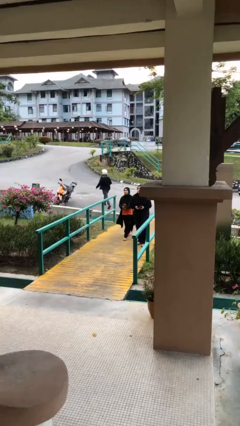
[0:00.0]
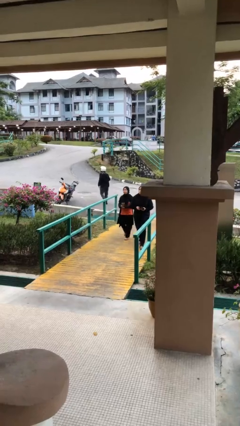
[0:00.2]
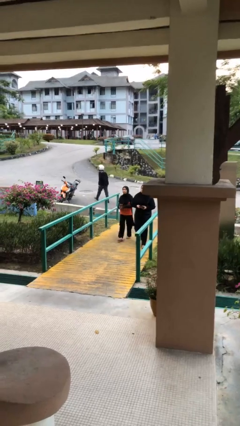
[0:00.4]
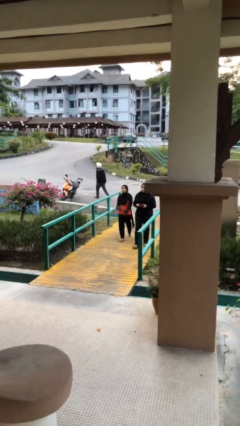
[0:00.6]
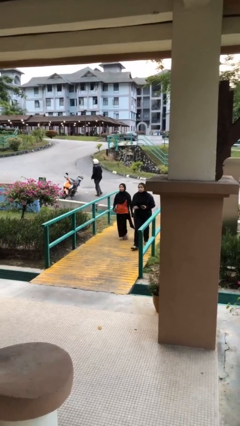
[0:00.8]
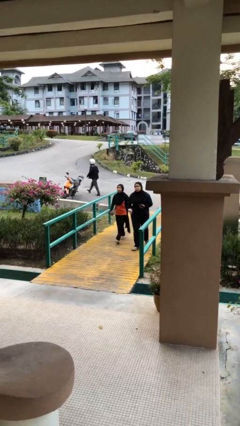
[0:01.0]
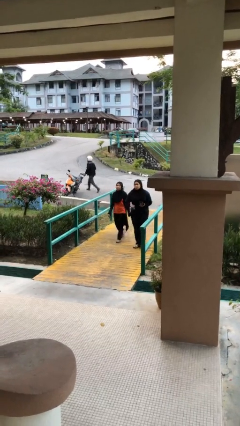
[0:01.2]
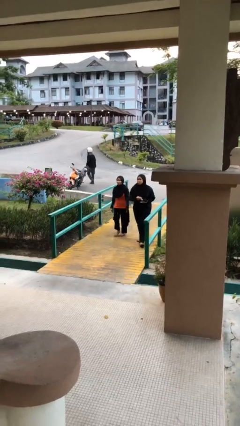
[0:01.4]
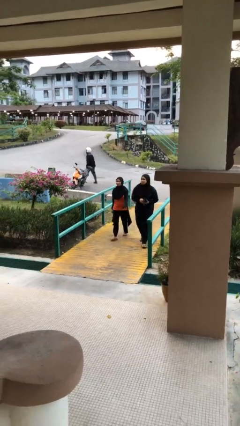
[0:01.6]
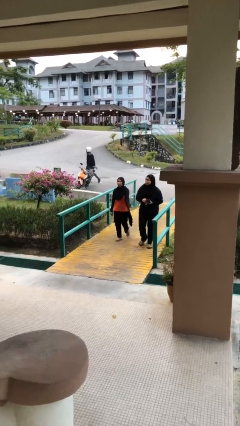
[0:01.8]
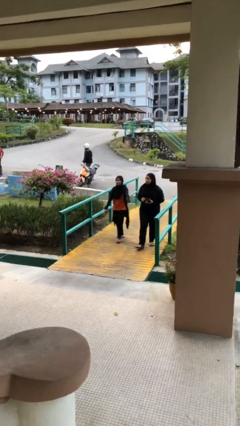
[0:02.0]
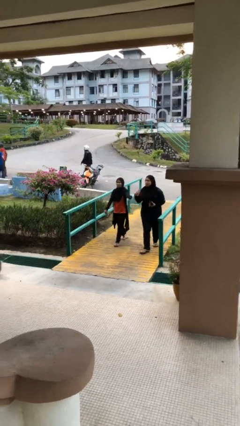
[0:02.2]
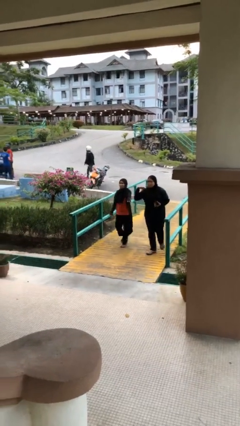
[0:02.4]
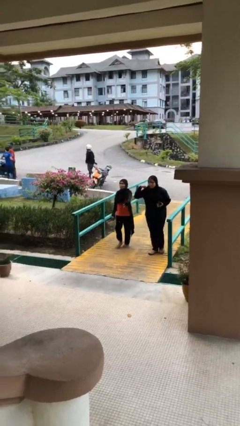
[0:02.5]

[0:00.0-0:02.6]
person talks to person

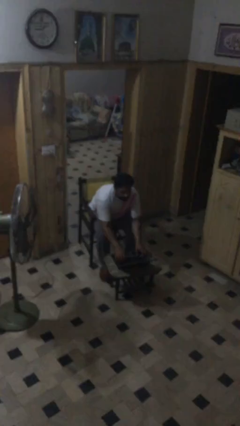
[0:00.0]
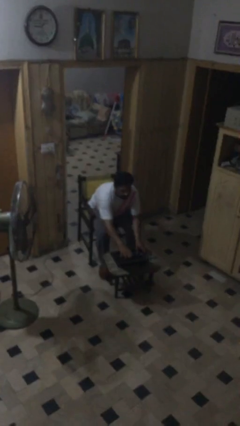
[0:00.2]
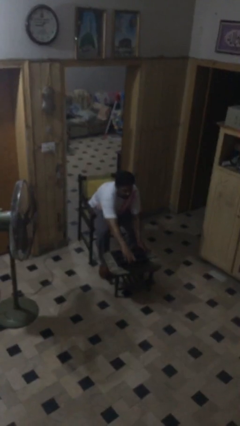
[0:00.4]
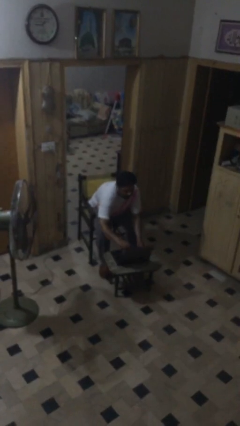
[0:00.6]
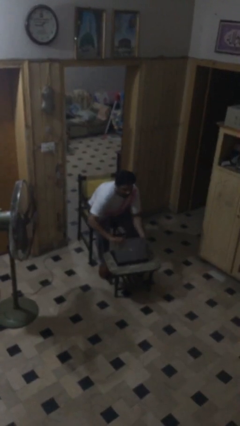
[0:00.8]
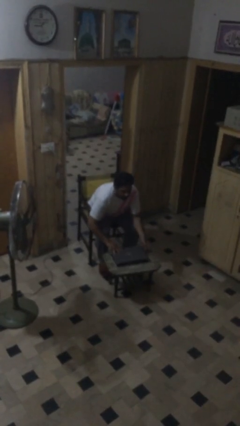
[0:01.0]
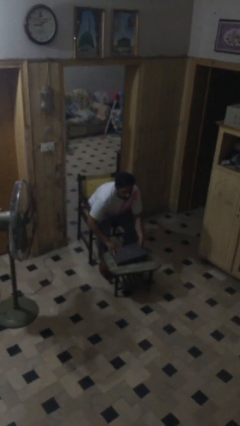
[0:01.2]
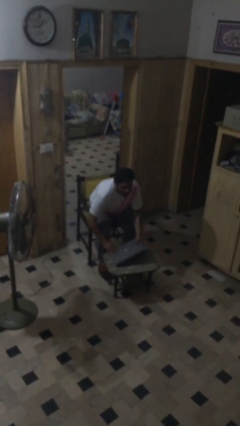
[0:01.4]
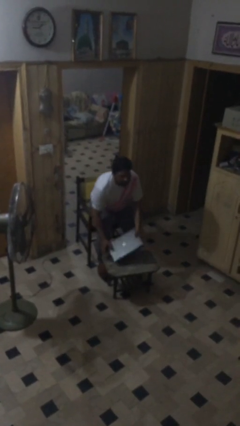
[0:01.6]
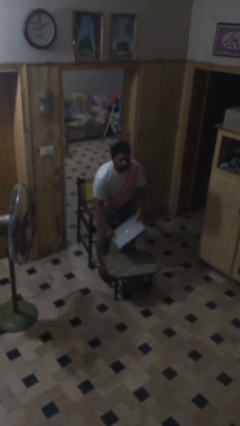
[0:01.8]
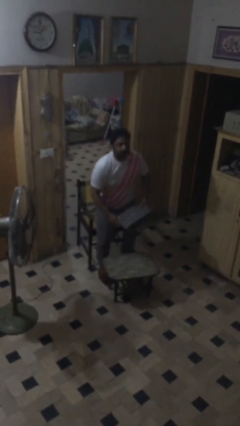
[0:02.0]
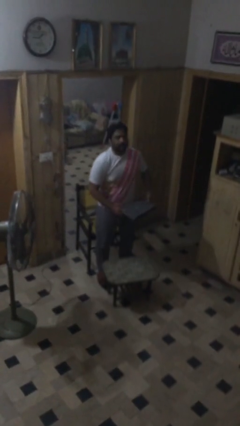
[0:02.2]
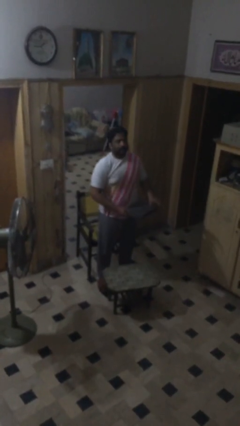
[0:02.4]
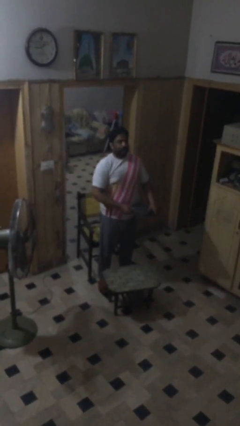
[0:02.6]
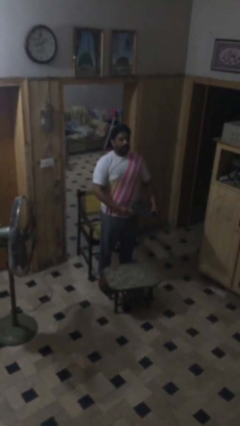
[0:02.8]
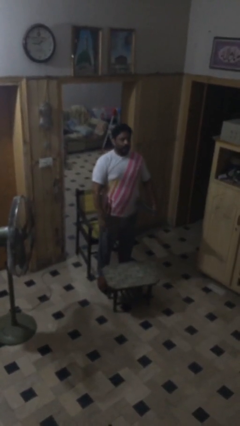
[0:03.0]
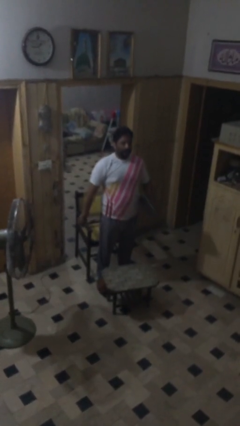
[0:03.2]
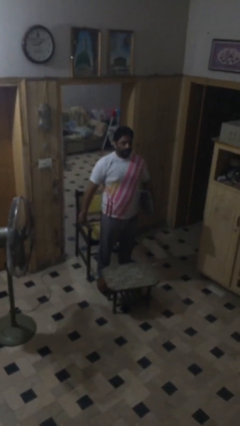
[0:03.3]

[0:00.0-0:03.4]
person stands up

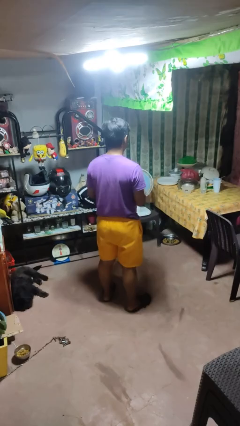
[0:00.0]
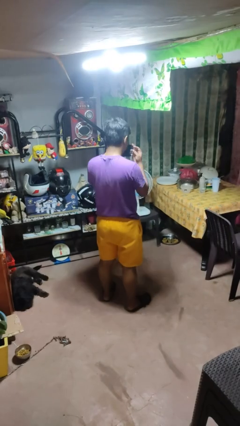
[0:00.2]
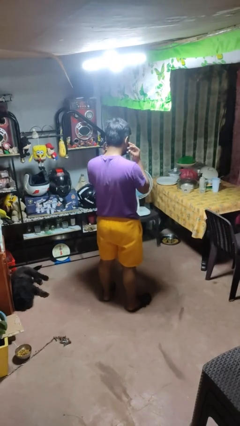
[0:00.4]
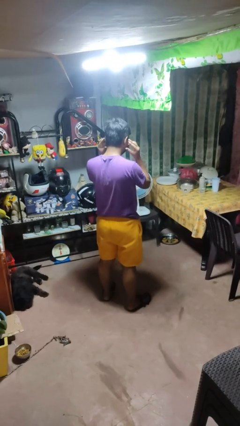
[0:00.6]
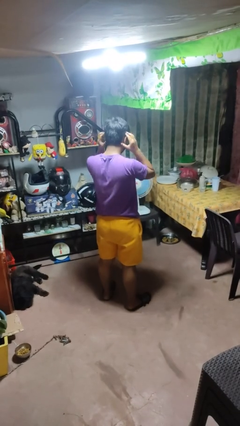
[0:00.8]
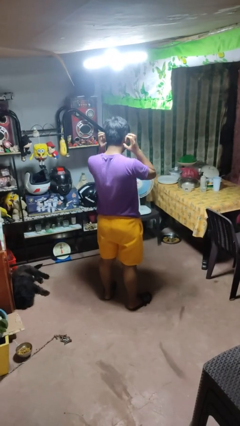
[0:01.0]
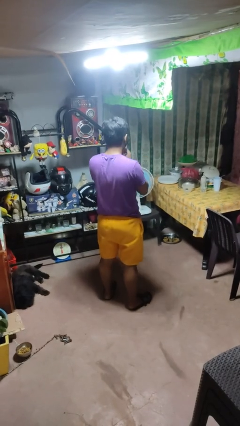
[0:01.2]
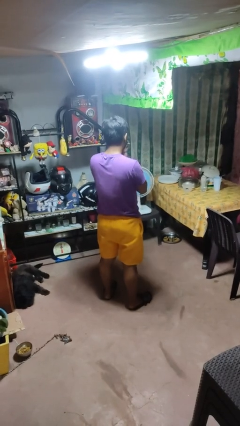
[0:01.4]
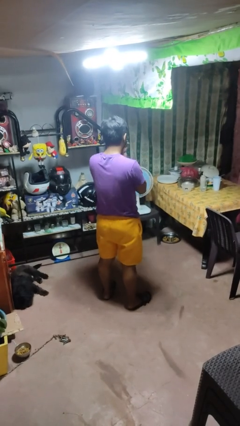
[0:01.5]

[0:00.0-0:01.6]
person puts on facemask

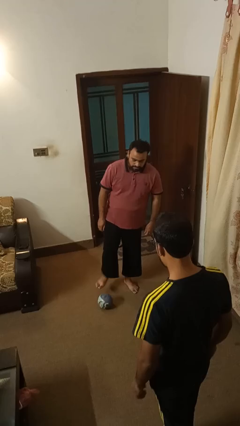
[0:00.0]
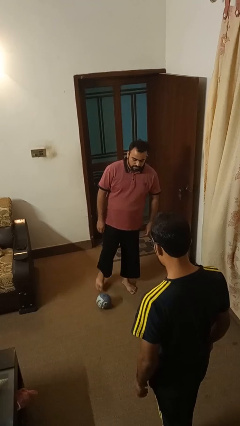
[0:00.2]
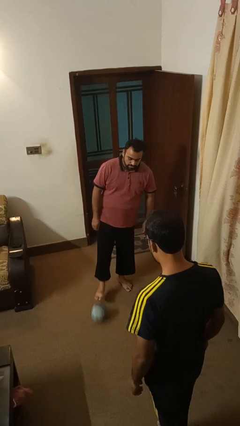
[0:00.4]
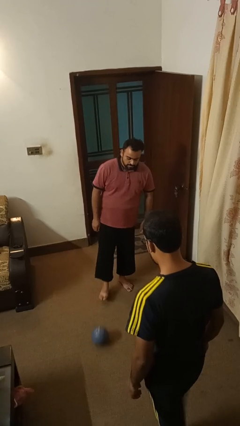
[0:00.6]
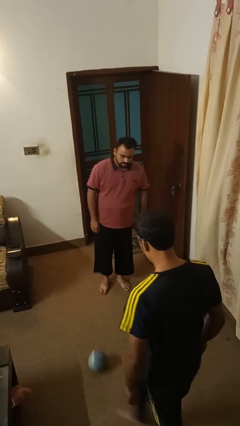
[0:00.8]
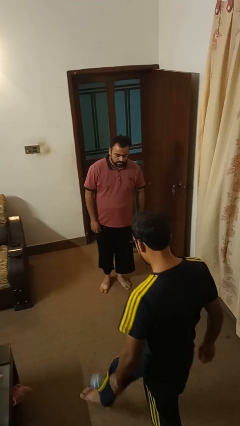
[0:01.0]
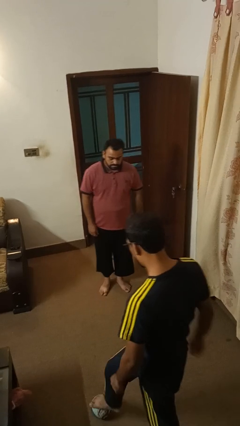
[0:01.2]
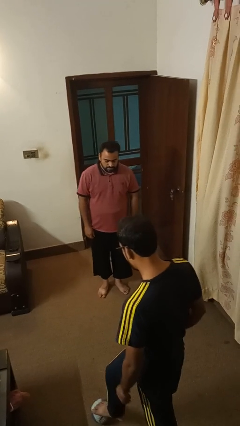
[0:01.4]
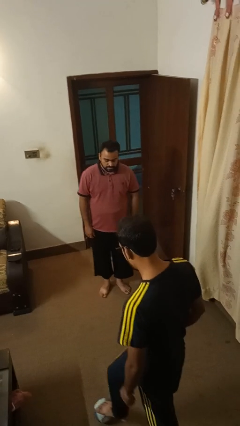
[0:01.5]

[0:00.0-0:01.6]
person kicks object to person

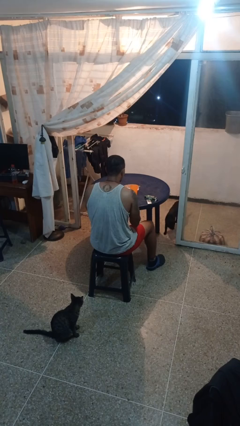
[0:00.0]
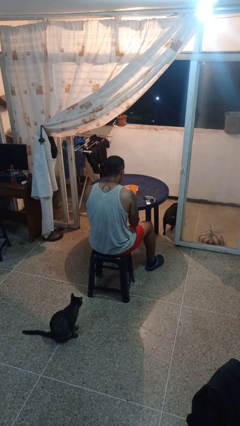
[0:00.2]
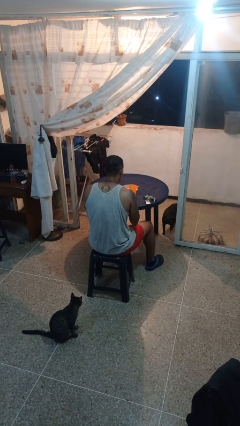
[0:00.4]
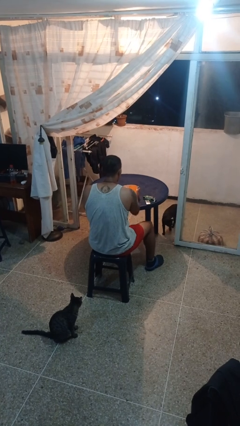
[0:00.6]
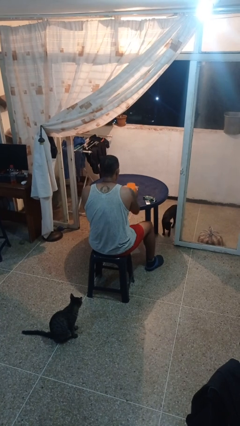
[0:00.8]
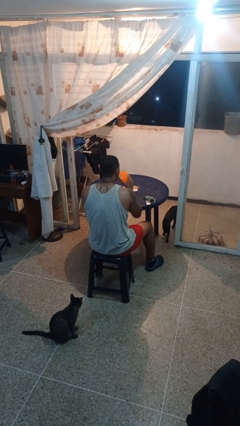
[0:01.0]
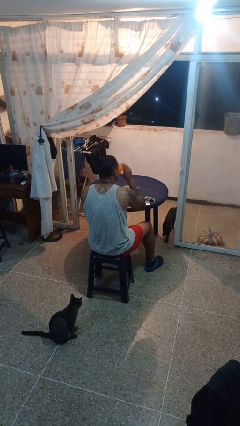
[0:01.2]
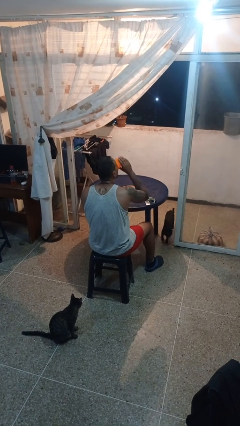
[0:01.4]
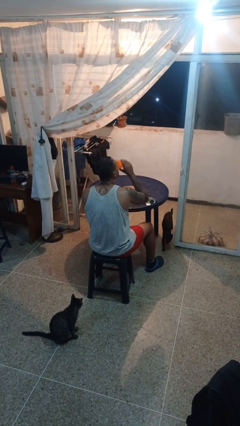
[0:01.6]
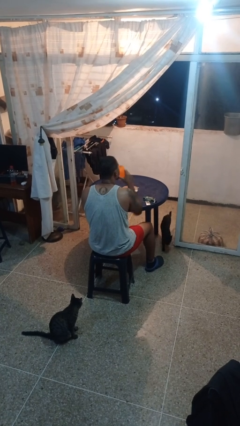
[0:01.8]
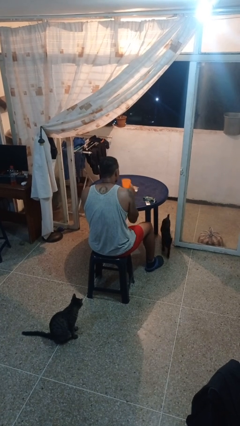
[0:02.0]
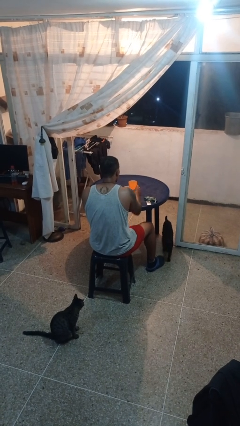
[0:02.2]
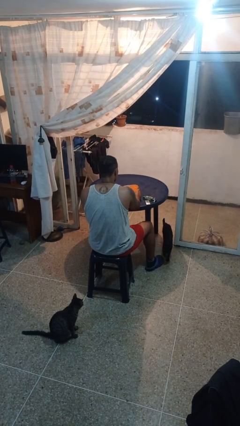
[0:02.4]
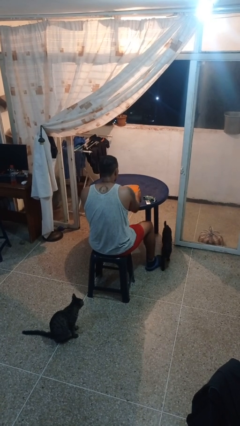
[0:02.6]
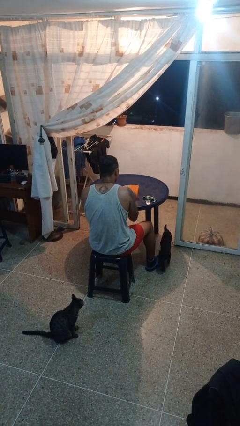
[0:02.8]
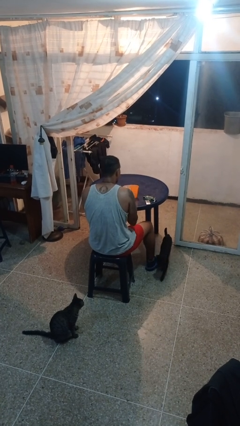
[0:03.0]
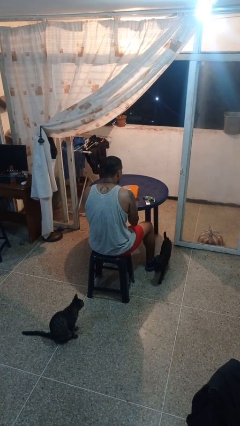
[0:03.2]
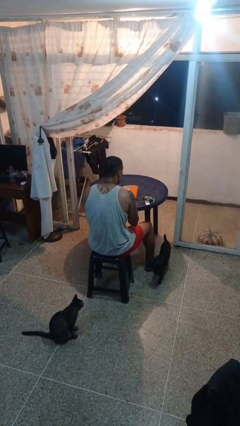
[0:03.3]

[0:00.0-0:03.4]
person drinks from cup

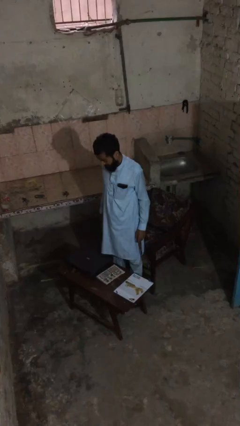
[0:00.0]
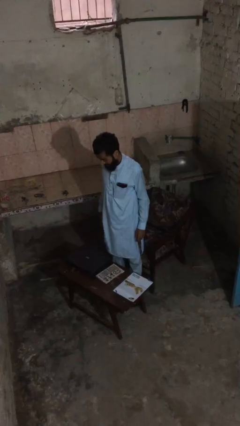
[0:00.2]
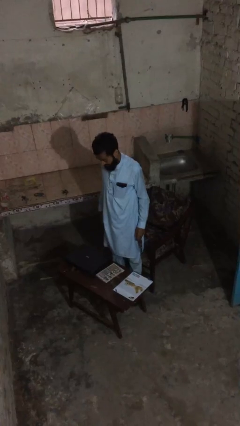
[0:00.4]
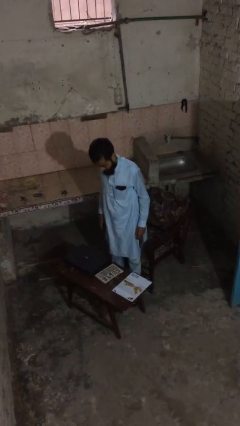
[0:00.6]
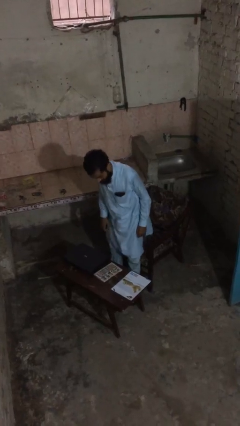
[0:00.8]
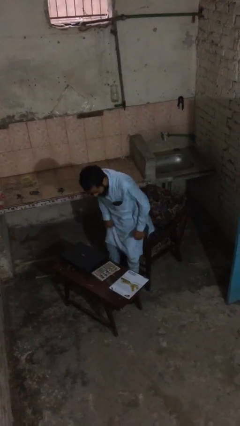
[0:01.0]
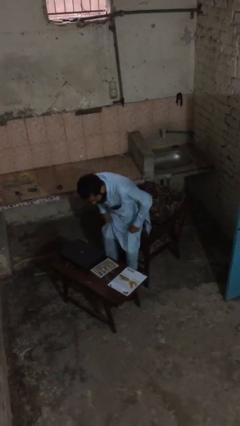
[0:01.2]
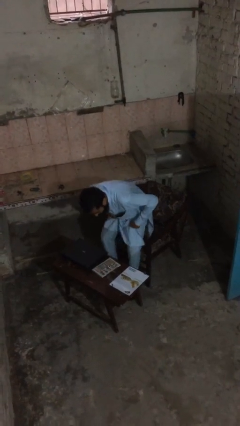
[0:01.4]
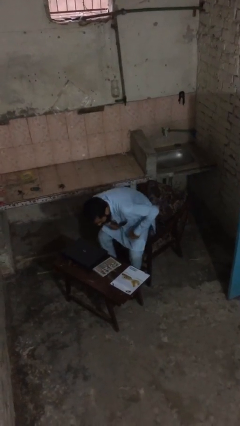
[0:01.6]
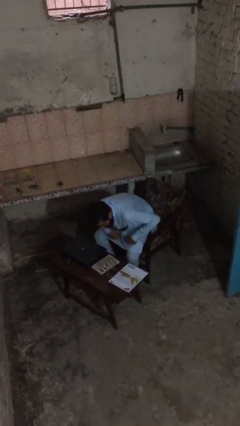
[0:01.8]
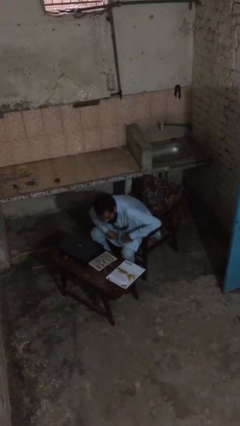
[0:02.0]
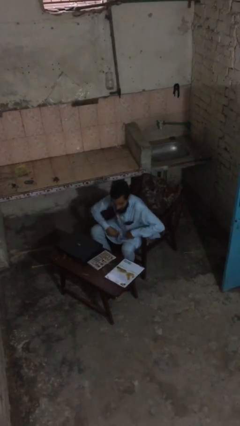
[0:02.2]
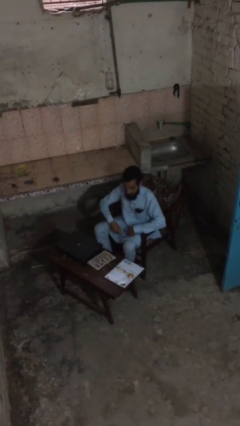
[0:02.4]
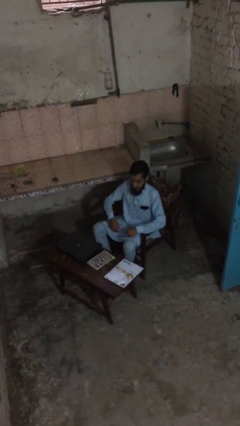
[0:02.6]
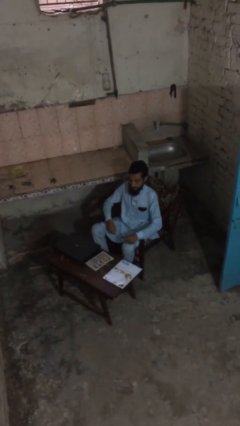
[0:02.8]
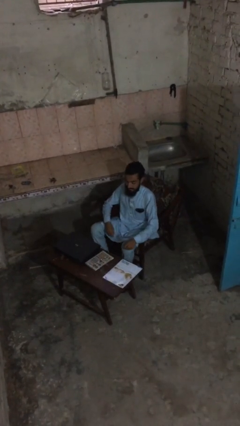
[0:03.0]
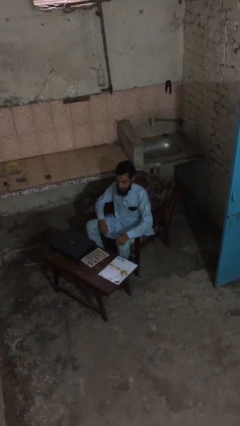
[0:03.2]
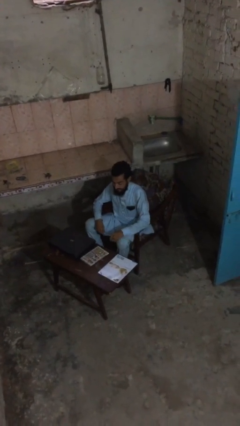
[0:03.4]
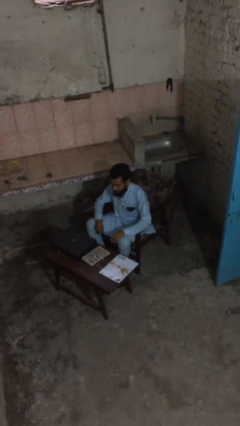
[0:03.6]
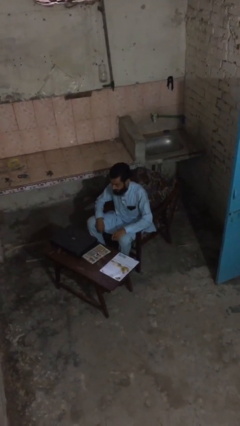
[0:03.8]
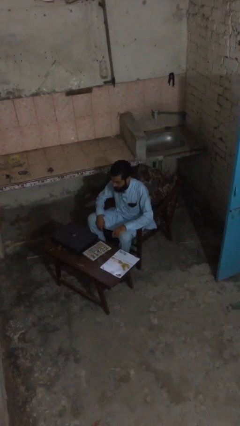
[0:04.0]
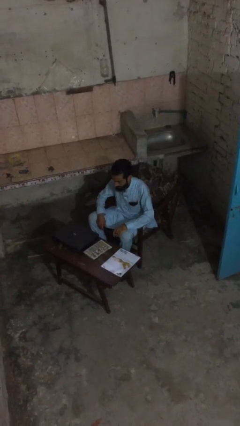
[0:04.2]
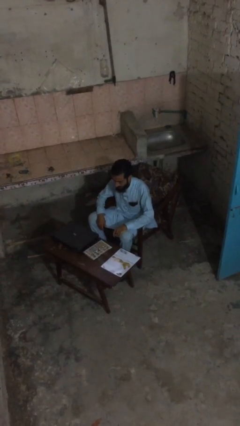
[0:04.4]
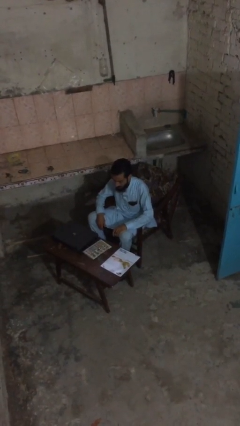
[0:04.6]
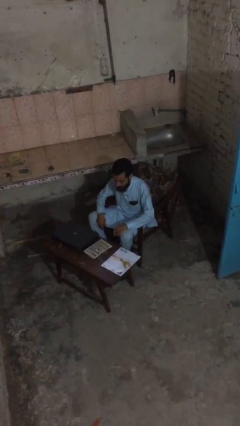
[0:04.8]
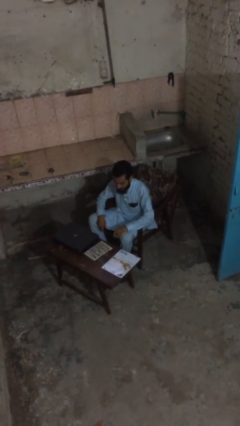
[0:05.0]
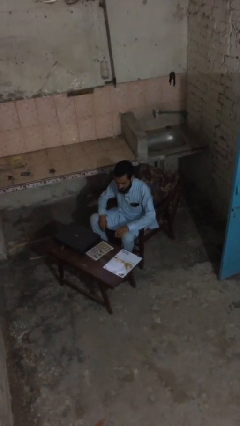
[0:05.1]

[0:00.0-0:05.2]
person sits down
